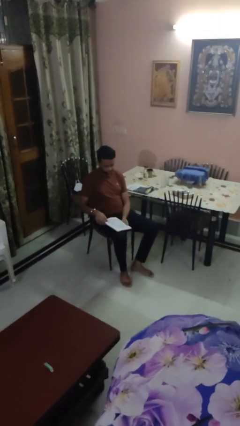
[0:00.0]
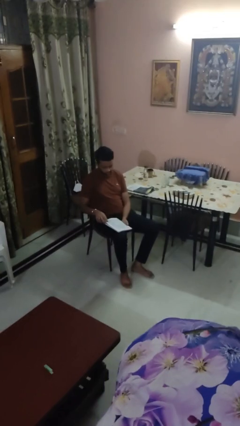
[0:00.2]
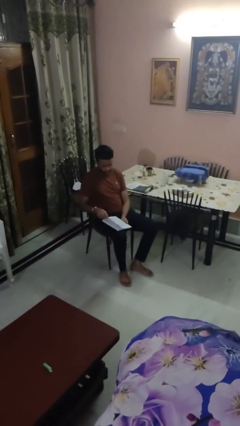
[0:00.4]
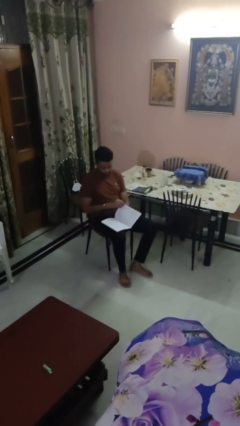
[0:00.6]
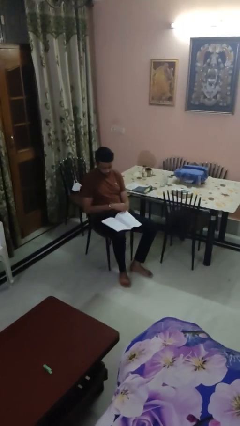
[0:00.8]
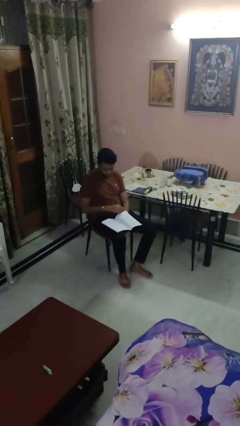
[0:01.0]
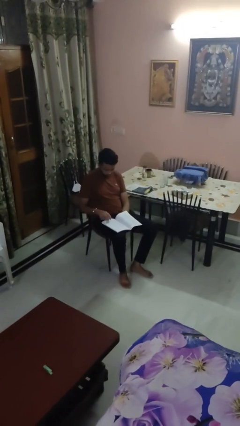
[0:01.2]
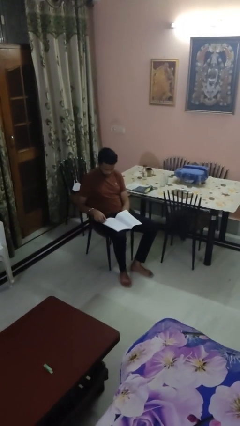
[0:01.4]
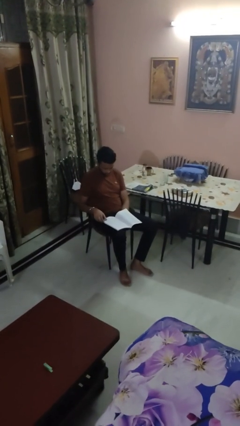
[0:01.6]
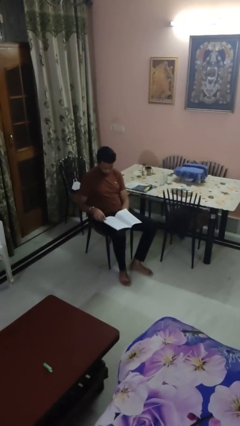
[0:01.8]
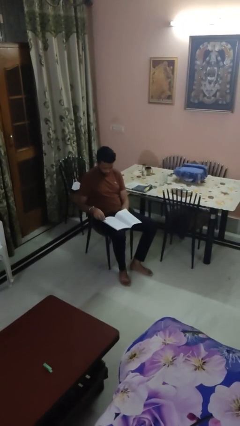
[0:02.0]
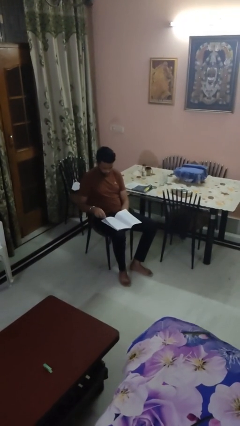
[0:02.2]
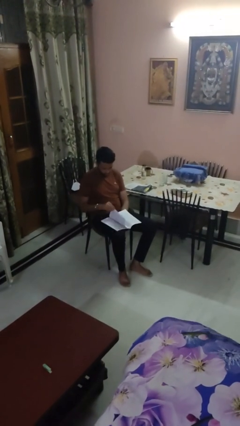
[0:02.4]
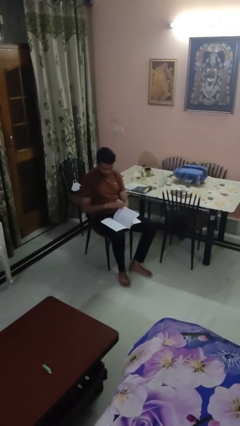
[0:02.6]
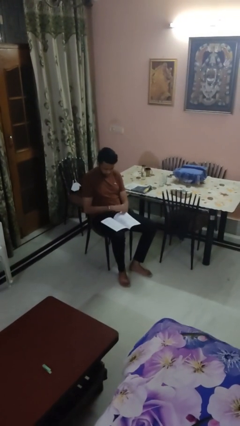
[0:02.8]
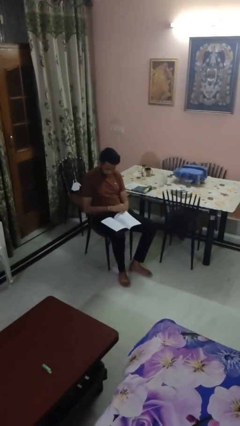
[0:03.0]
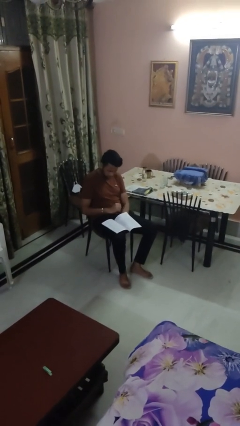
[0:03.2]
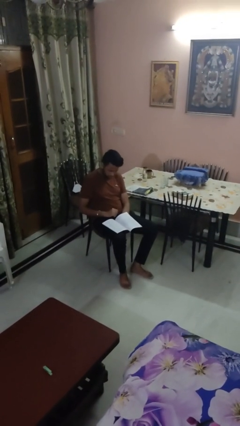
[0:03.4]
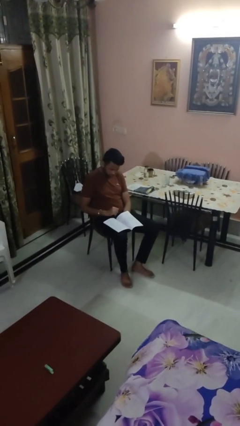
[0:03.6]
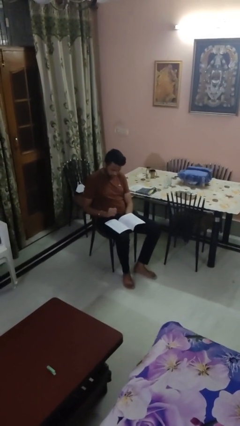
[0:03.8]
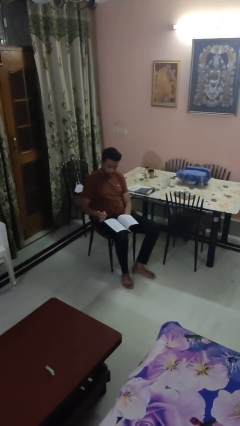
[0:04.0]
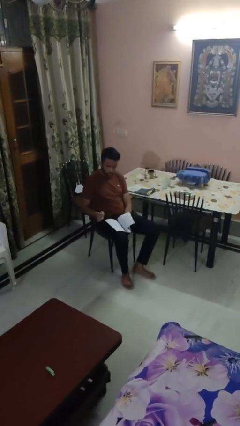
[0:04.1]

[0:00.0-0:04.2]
person reads magazine

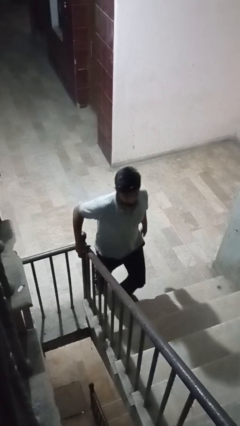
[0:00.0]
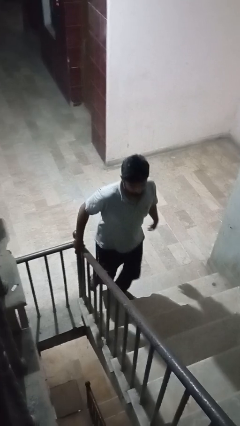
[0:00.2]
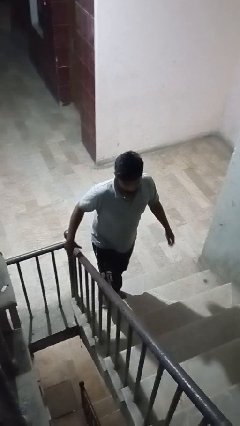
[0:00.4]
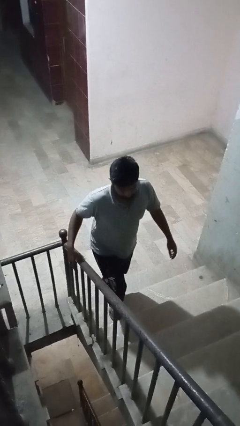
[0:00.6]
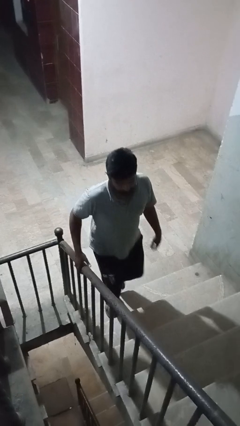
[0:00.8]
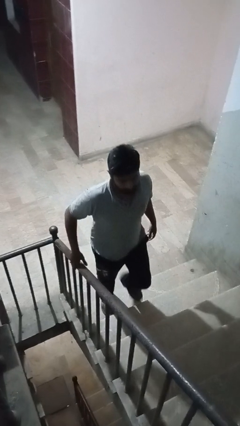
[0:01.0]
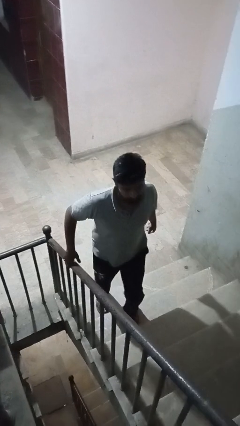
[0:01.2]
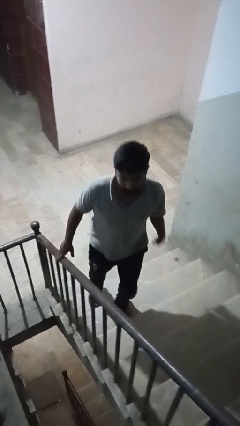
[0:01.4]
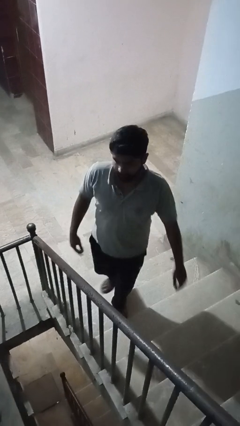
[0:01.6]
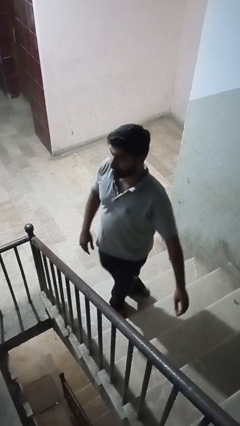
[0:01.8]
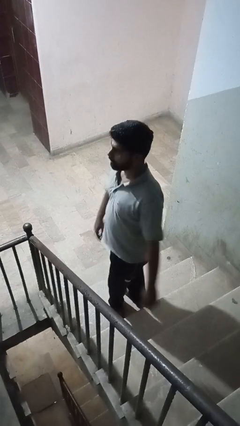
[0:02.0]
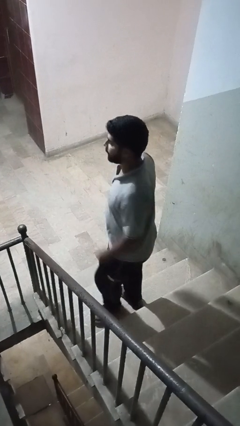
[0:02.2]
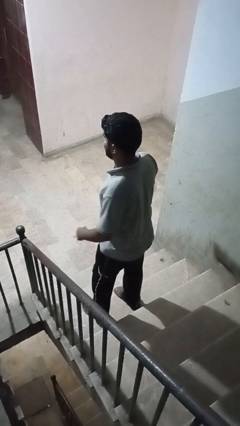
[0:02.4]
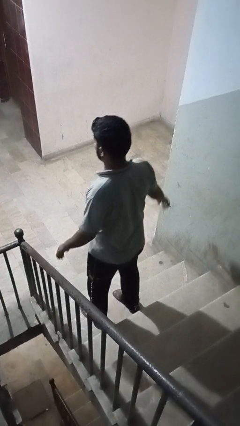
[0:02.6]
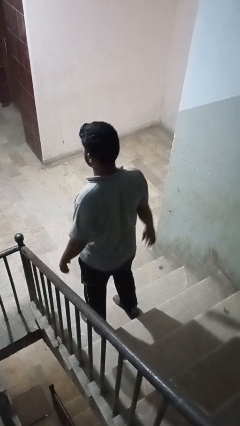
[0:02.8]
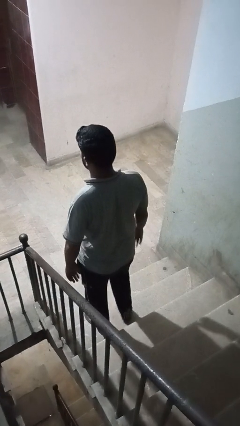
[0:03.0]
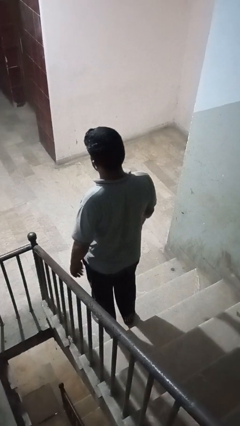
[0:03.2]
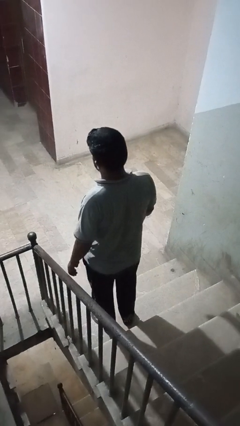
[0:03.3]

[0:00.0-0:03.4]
person climbs up stairs

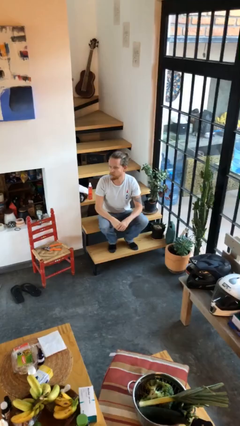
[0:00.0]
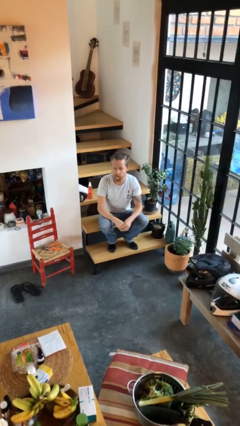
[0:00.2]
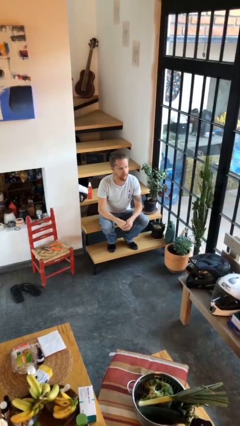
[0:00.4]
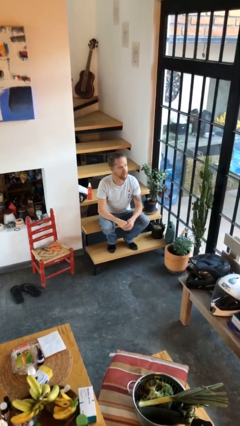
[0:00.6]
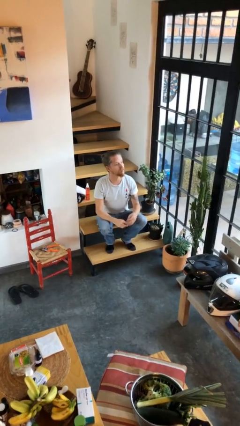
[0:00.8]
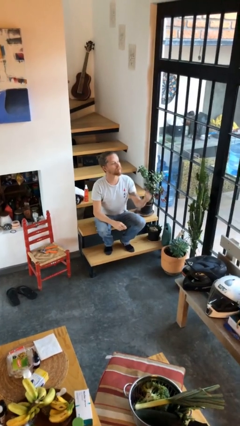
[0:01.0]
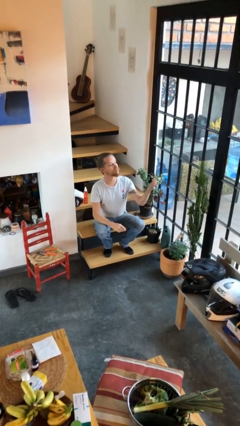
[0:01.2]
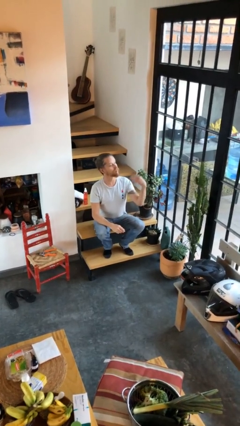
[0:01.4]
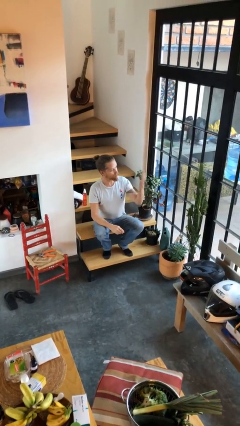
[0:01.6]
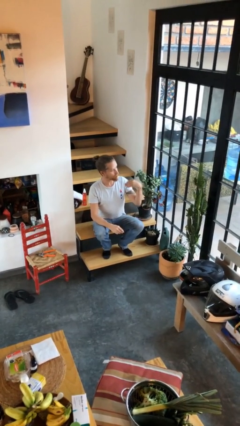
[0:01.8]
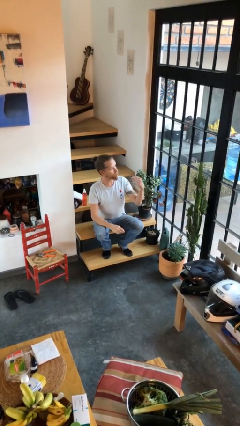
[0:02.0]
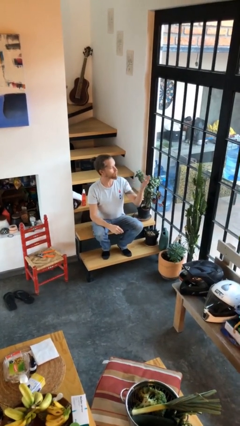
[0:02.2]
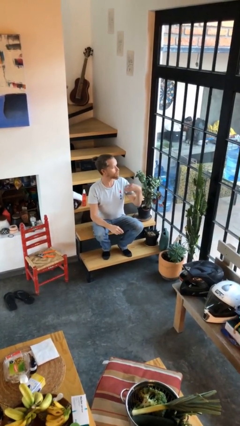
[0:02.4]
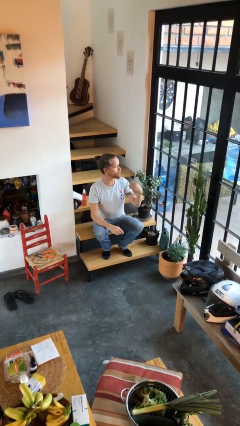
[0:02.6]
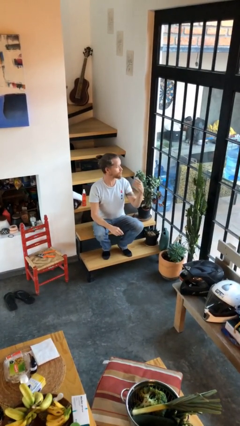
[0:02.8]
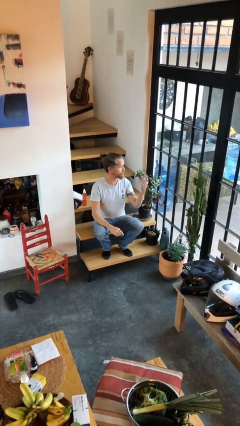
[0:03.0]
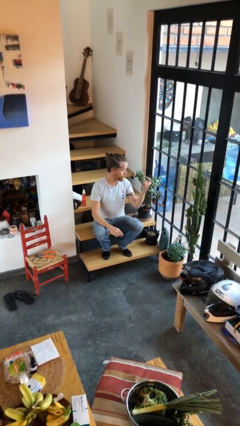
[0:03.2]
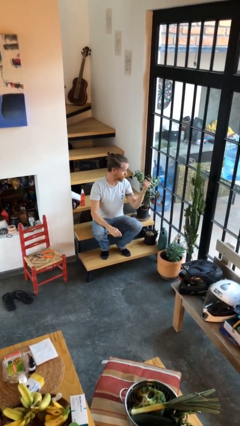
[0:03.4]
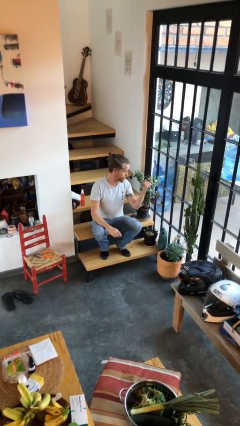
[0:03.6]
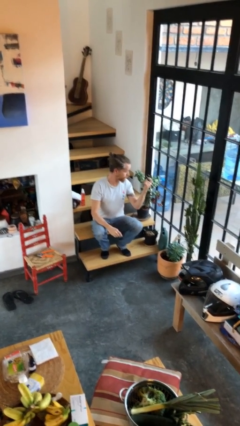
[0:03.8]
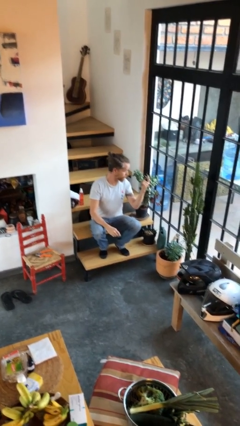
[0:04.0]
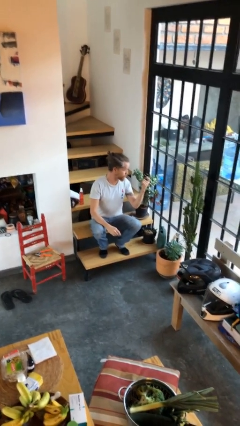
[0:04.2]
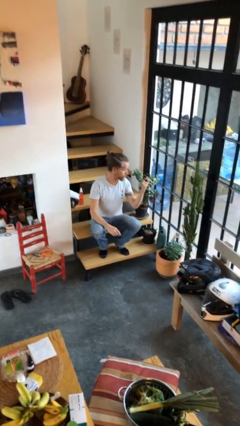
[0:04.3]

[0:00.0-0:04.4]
person gestures come here

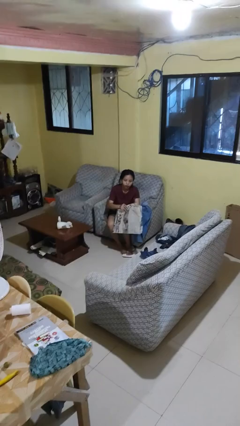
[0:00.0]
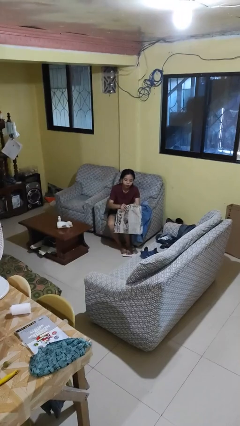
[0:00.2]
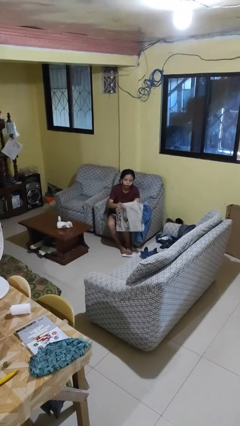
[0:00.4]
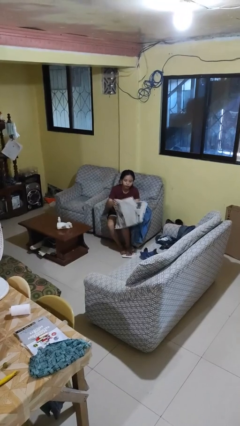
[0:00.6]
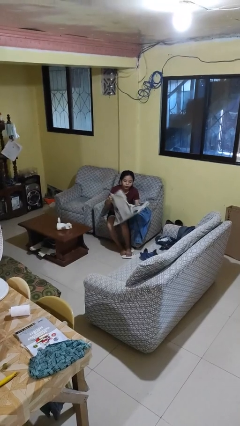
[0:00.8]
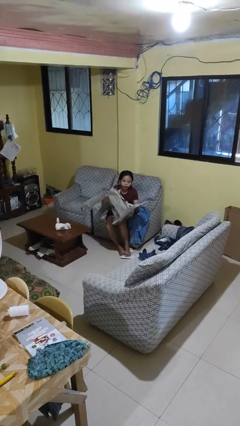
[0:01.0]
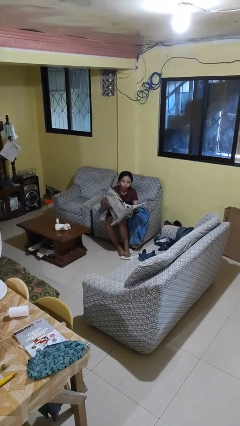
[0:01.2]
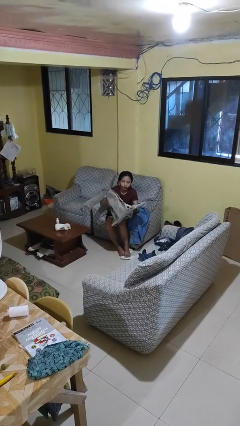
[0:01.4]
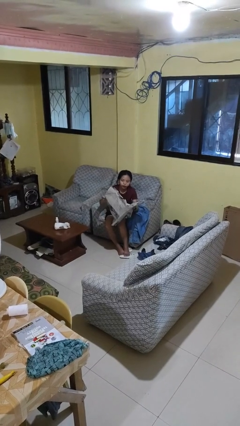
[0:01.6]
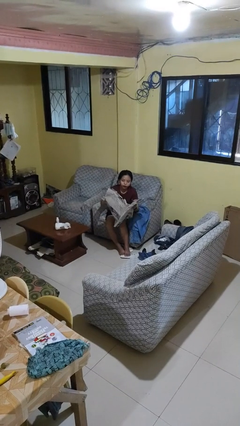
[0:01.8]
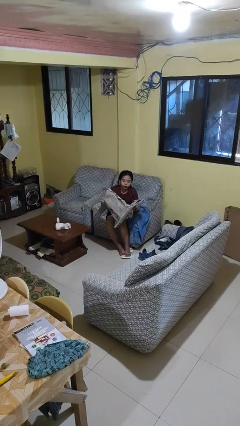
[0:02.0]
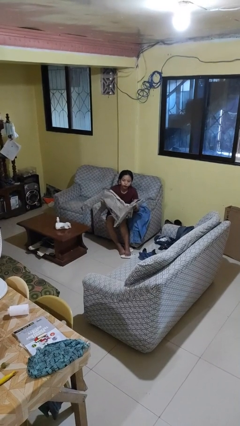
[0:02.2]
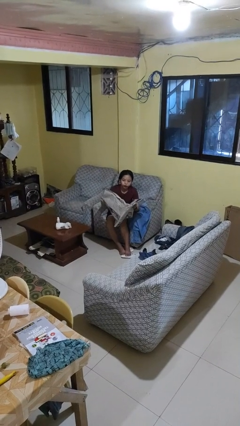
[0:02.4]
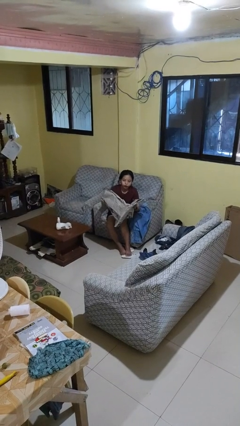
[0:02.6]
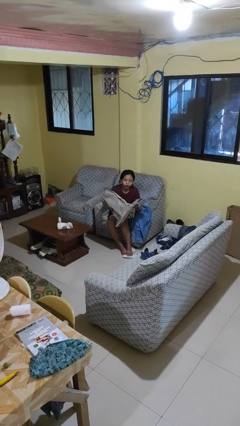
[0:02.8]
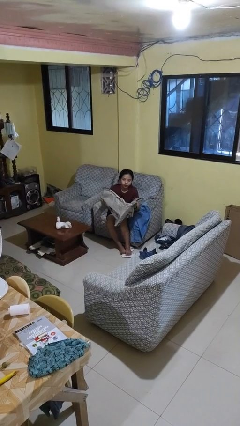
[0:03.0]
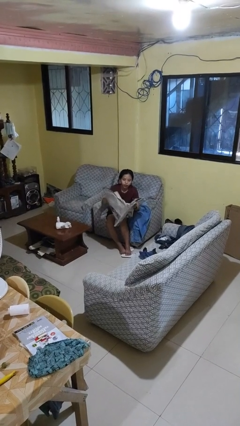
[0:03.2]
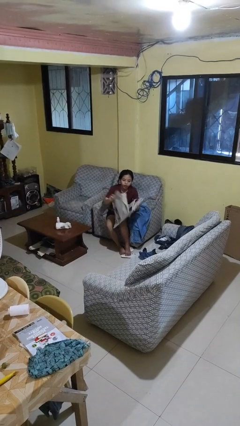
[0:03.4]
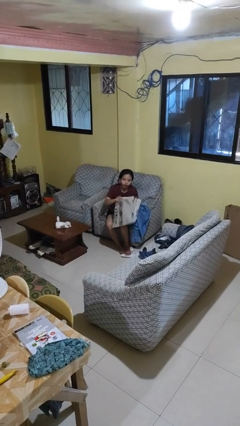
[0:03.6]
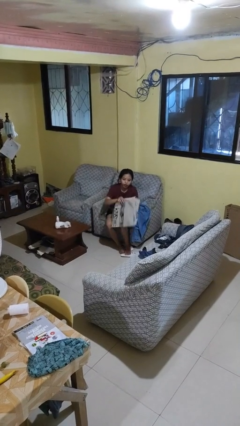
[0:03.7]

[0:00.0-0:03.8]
person reads newspaper

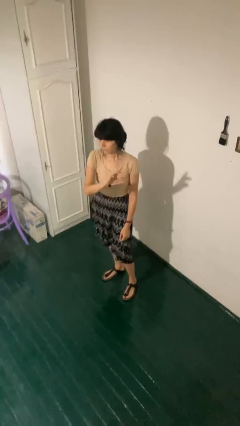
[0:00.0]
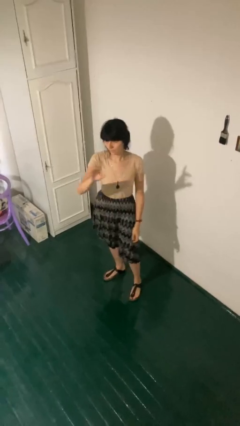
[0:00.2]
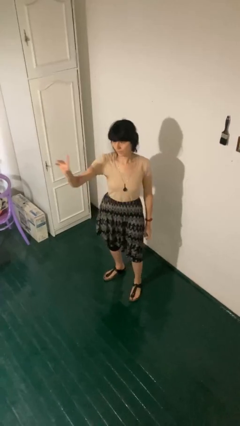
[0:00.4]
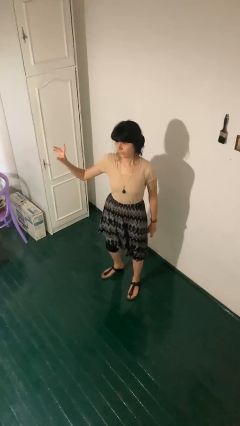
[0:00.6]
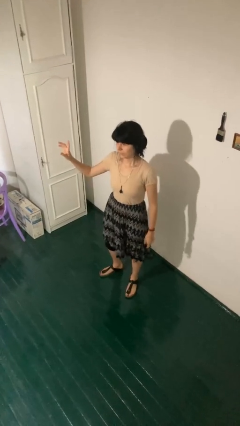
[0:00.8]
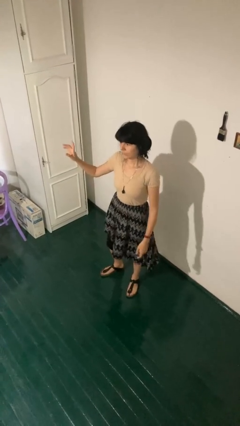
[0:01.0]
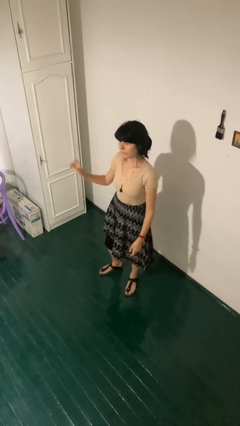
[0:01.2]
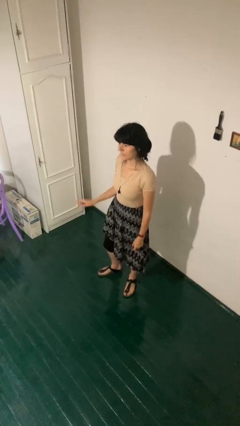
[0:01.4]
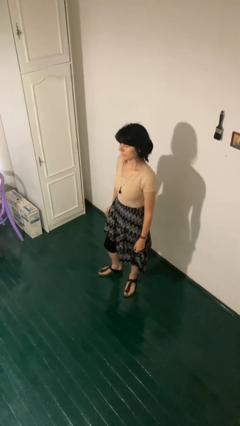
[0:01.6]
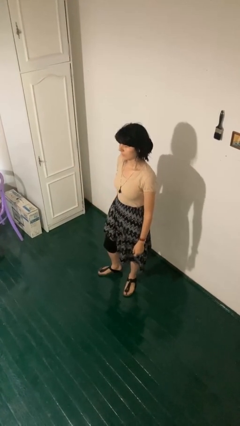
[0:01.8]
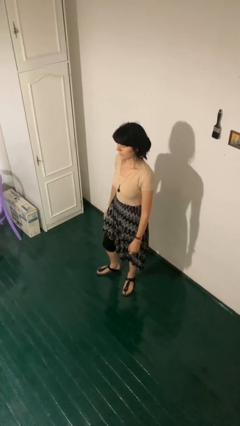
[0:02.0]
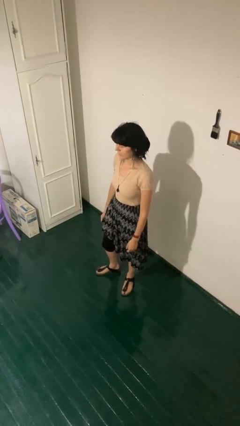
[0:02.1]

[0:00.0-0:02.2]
person gestures swipe right
